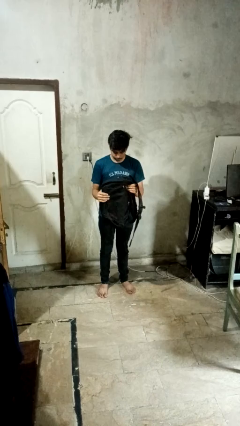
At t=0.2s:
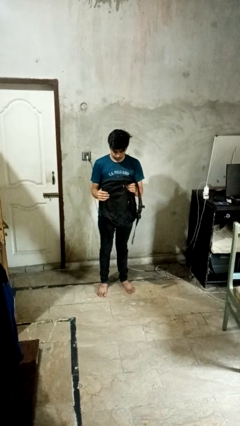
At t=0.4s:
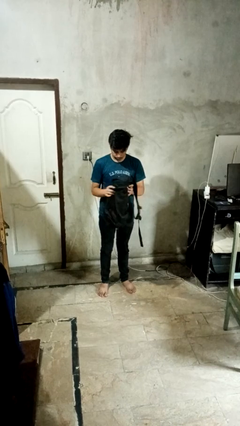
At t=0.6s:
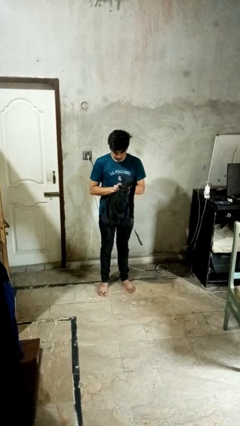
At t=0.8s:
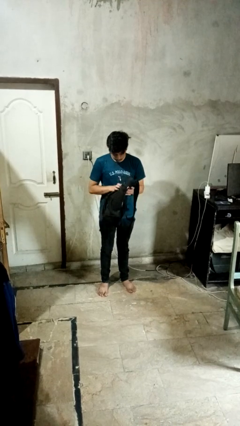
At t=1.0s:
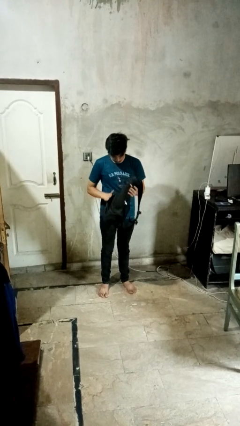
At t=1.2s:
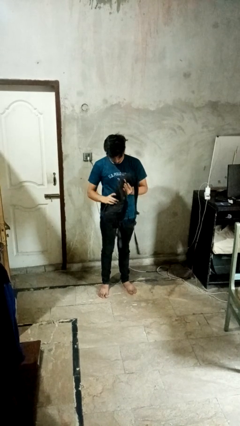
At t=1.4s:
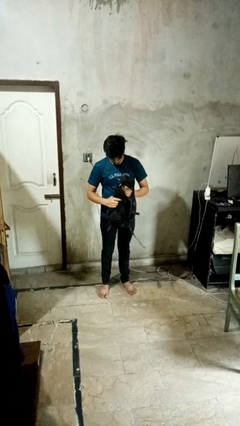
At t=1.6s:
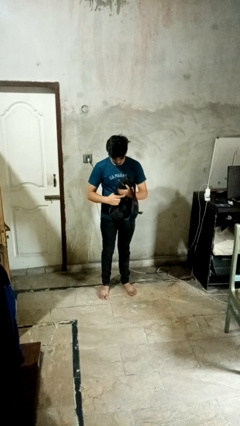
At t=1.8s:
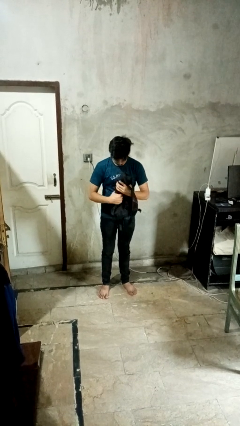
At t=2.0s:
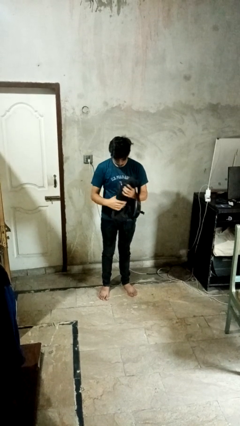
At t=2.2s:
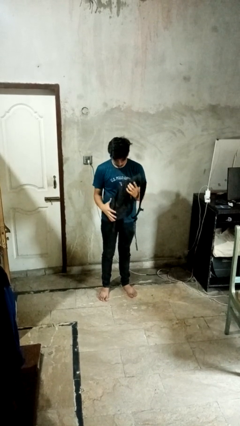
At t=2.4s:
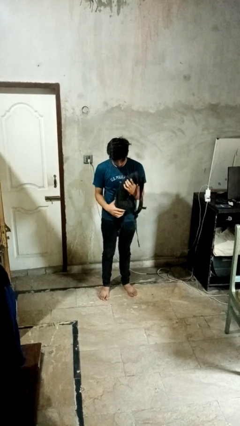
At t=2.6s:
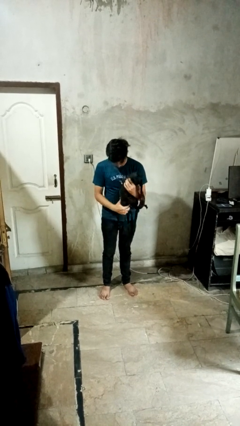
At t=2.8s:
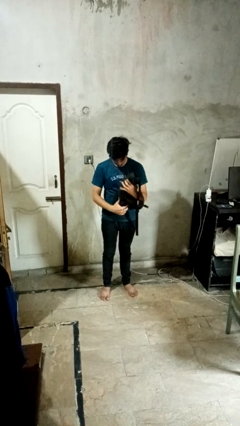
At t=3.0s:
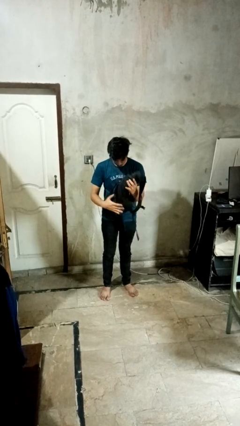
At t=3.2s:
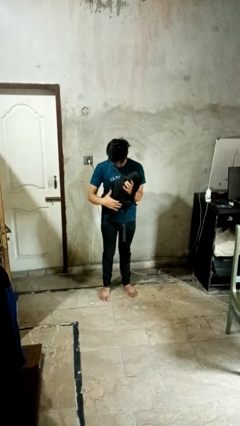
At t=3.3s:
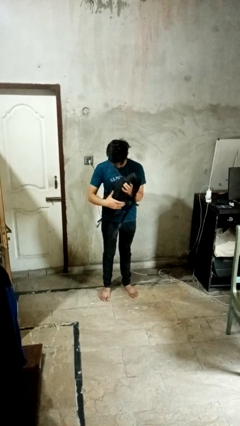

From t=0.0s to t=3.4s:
person squeezes object

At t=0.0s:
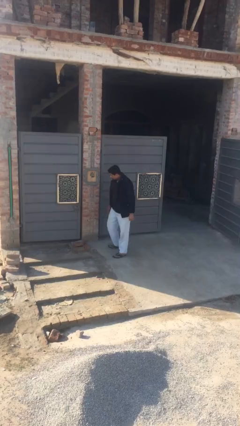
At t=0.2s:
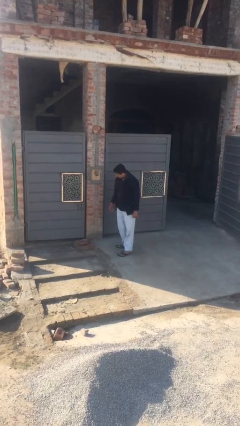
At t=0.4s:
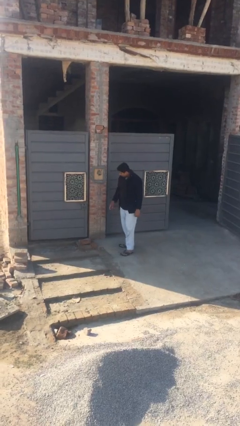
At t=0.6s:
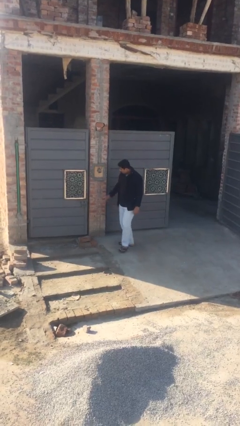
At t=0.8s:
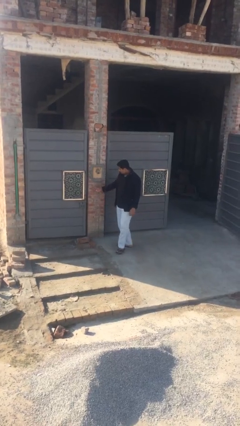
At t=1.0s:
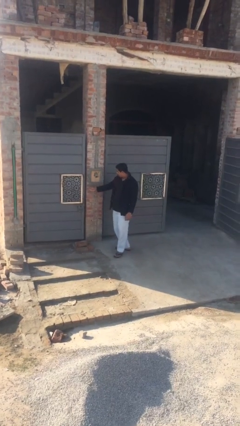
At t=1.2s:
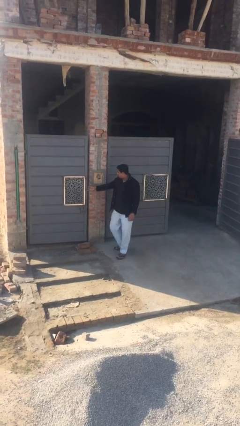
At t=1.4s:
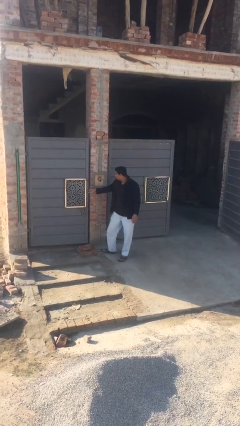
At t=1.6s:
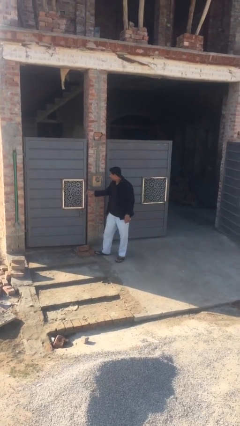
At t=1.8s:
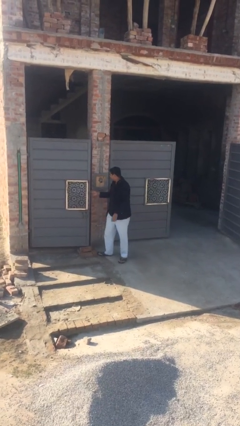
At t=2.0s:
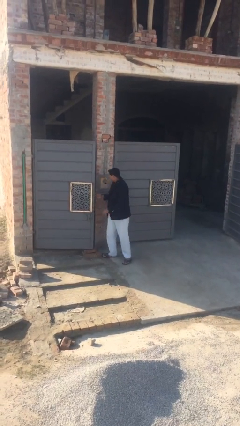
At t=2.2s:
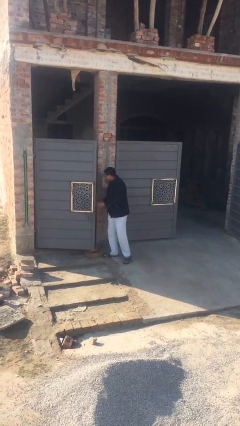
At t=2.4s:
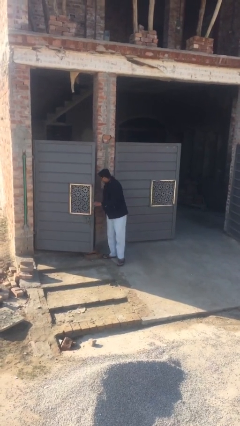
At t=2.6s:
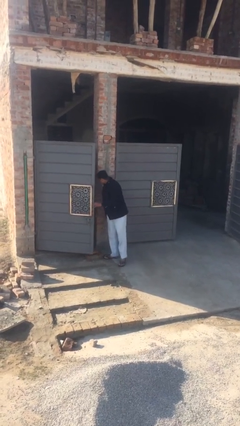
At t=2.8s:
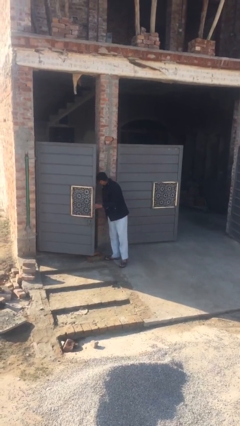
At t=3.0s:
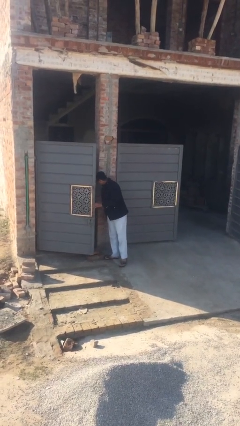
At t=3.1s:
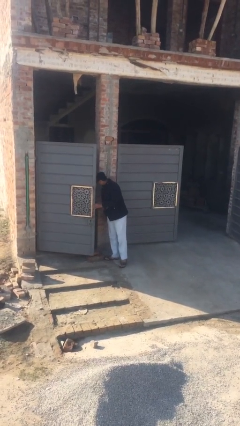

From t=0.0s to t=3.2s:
person opens facility door

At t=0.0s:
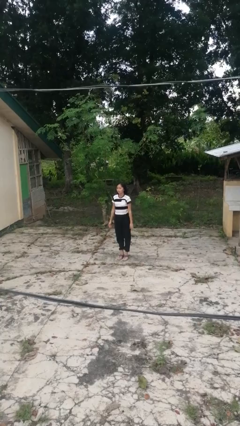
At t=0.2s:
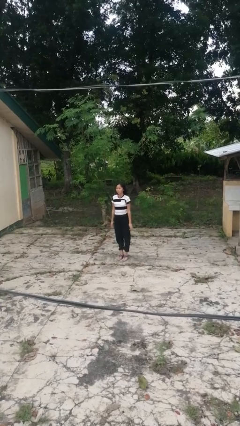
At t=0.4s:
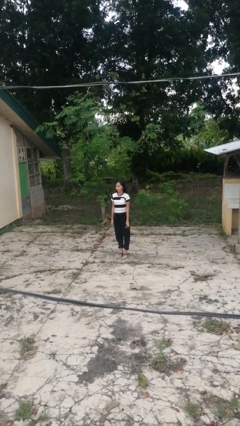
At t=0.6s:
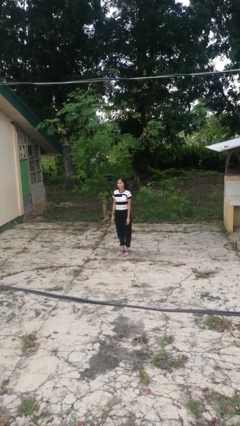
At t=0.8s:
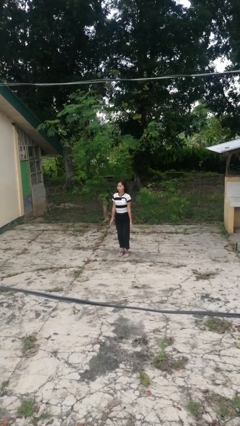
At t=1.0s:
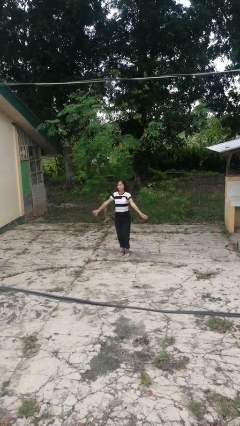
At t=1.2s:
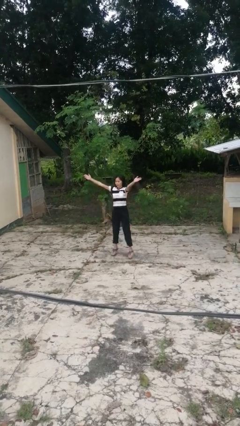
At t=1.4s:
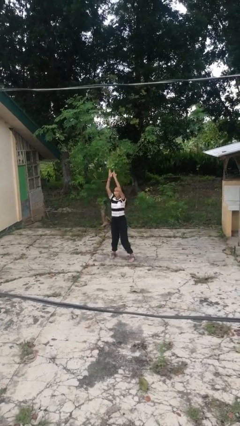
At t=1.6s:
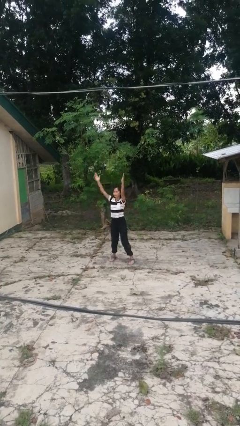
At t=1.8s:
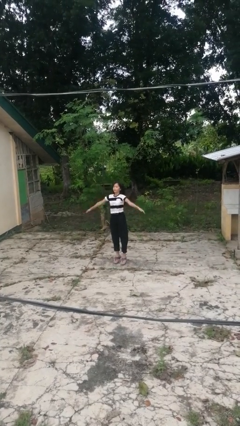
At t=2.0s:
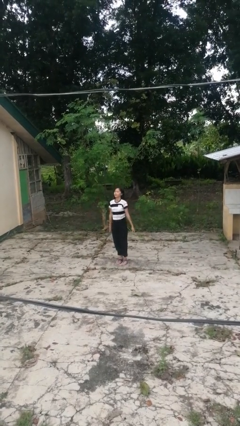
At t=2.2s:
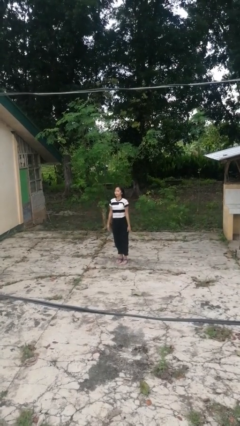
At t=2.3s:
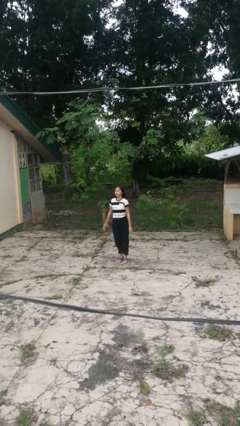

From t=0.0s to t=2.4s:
person exercises with jumping jacks

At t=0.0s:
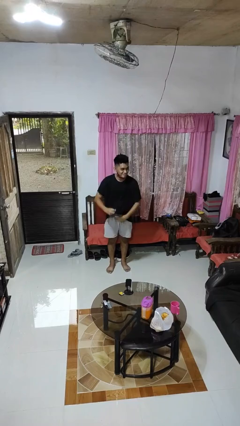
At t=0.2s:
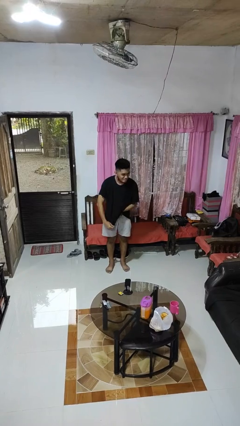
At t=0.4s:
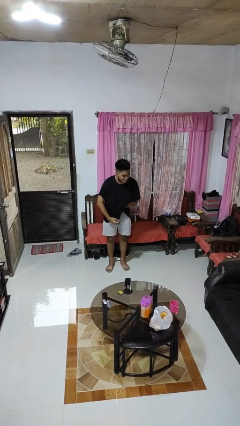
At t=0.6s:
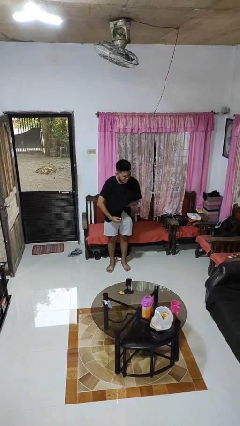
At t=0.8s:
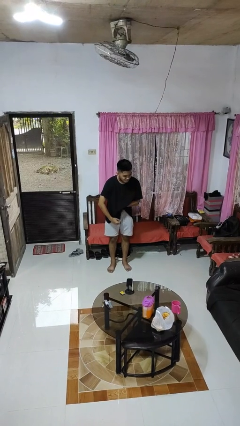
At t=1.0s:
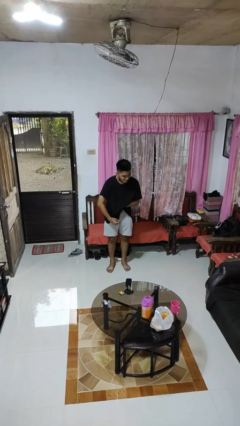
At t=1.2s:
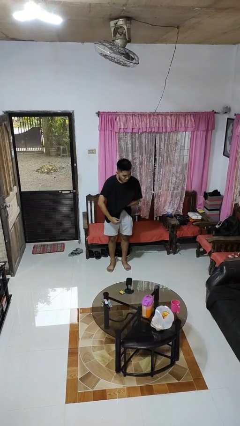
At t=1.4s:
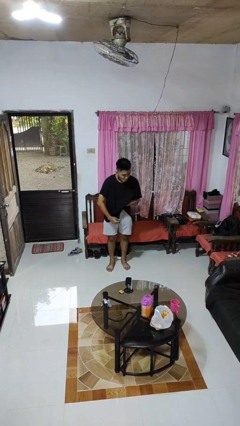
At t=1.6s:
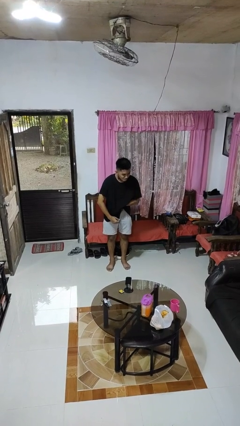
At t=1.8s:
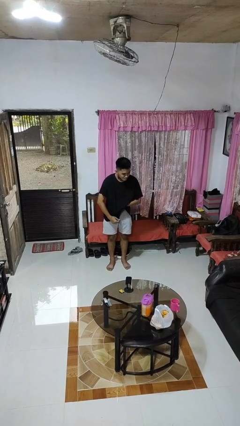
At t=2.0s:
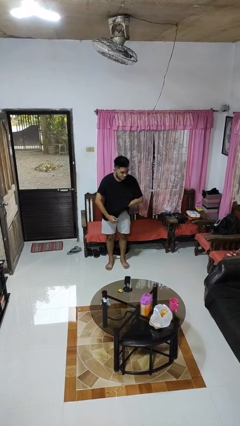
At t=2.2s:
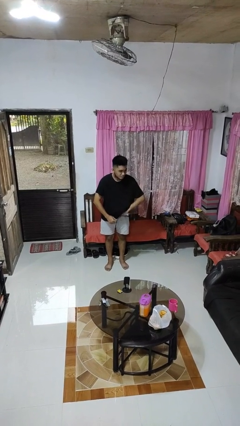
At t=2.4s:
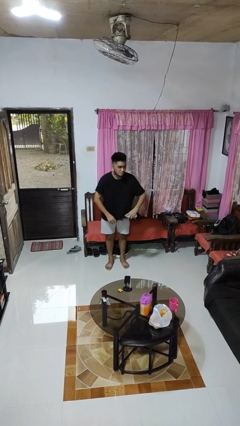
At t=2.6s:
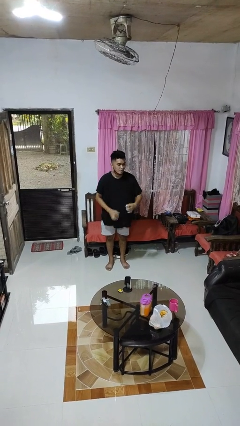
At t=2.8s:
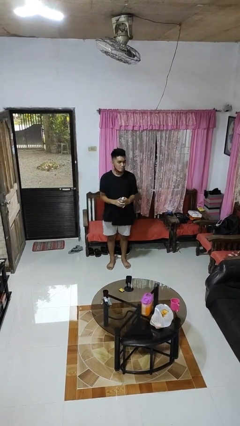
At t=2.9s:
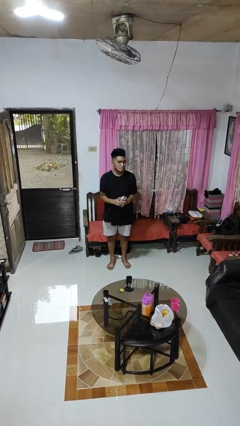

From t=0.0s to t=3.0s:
person applies deodorant

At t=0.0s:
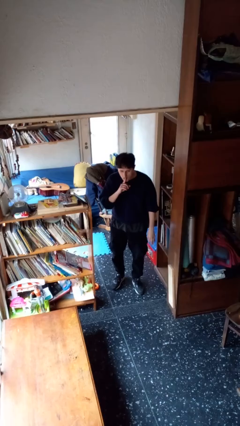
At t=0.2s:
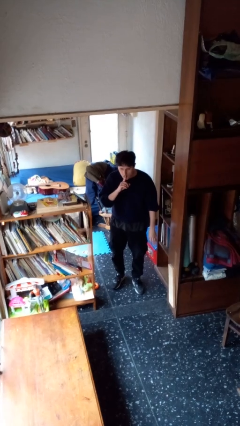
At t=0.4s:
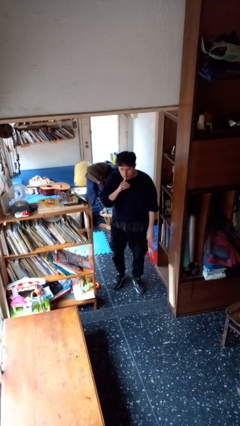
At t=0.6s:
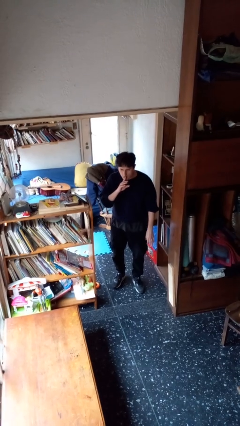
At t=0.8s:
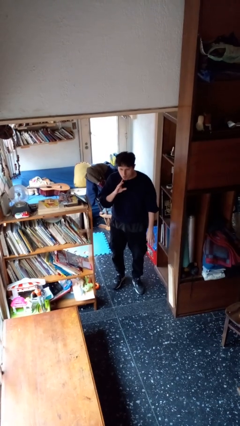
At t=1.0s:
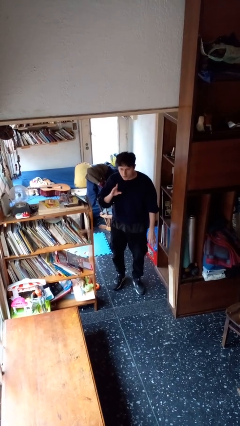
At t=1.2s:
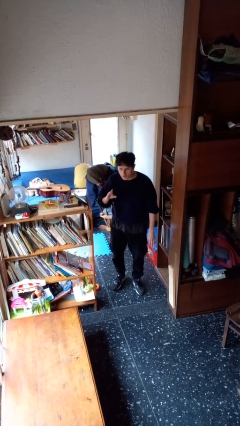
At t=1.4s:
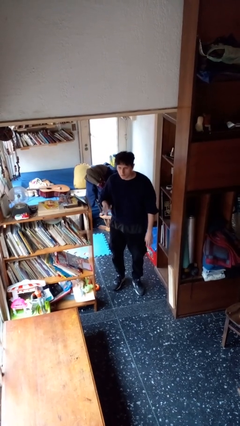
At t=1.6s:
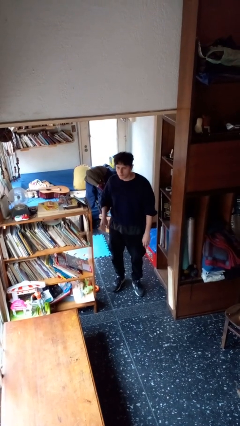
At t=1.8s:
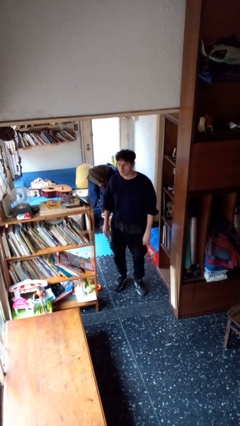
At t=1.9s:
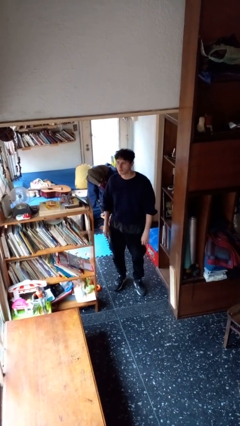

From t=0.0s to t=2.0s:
person gestures be quiet

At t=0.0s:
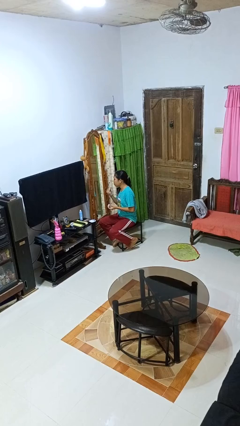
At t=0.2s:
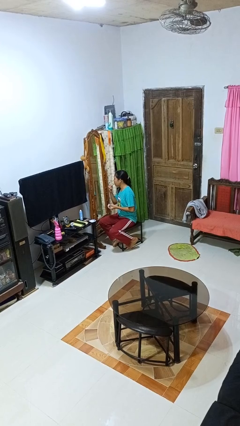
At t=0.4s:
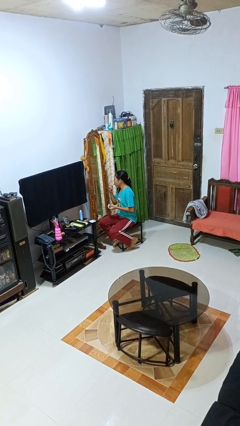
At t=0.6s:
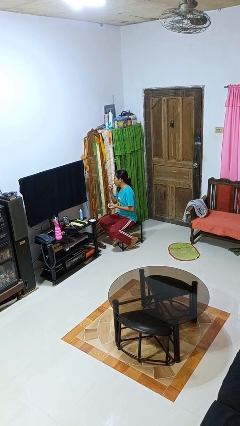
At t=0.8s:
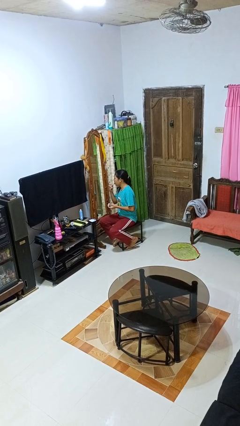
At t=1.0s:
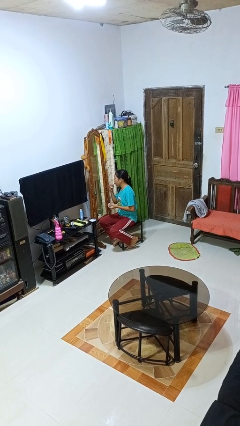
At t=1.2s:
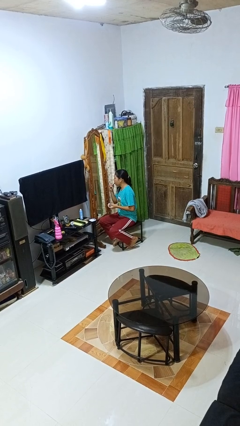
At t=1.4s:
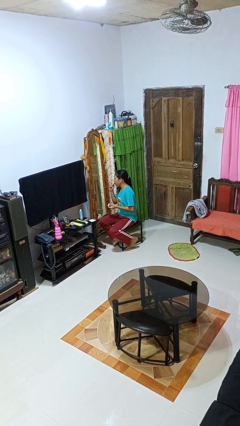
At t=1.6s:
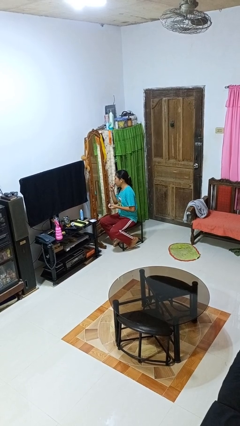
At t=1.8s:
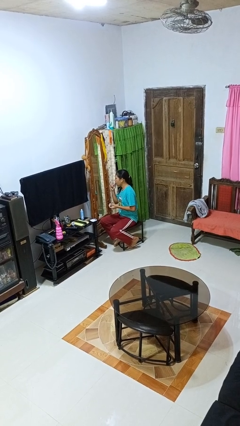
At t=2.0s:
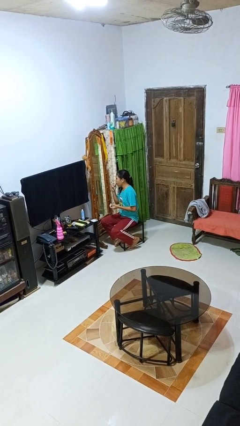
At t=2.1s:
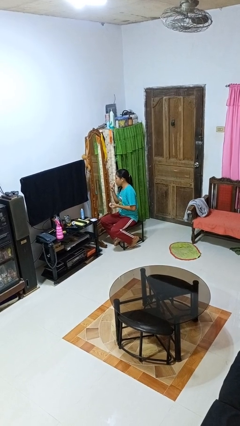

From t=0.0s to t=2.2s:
person applies lip makeup

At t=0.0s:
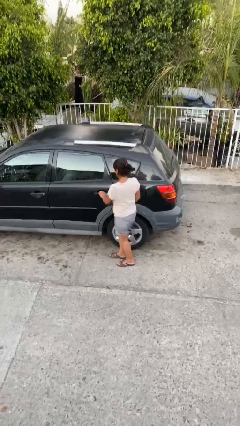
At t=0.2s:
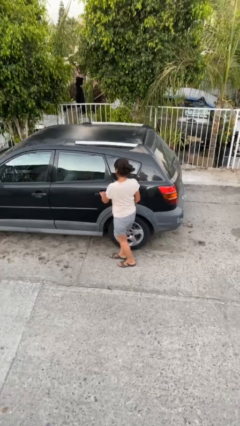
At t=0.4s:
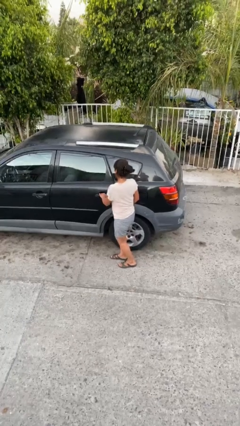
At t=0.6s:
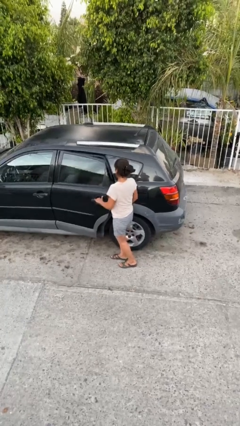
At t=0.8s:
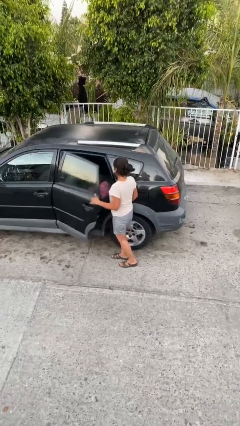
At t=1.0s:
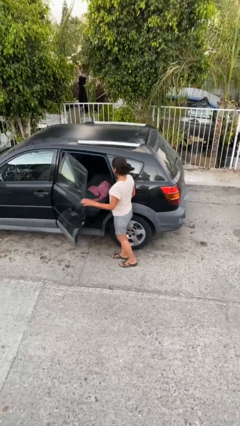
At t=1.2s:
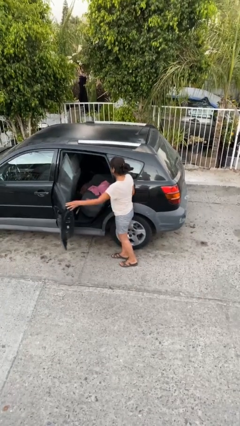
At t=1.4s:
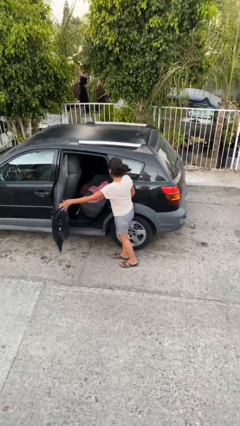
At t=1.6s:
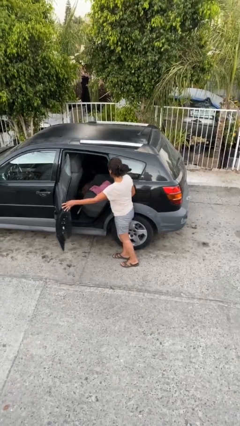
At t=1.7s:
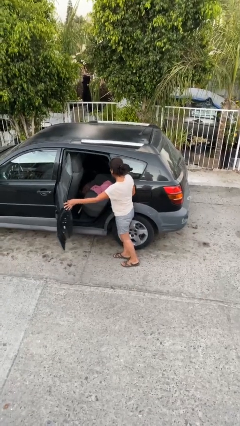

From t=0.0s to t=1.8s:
person opens car door
